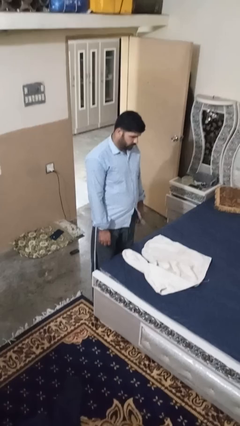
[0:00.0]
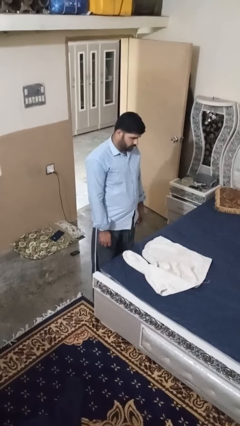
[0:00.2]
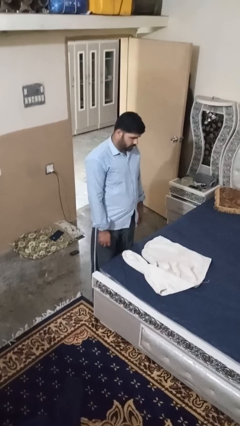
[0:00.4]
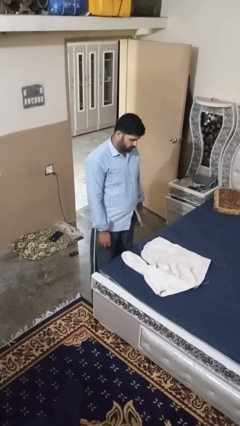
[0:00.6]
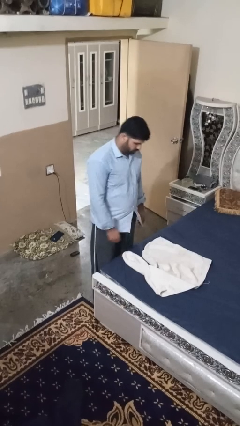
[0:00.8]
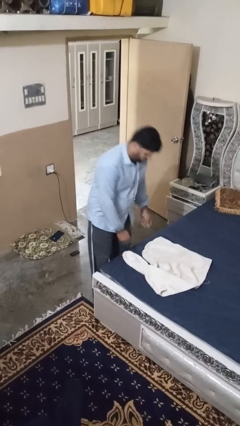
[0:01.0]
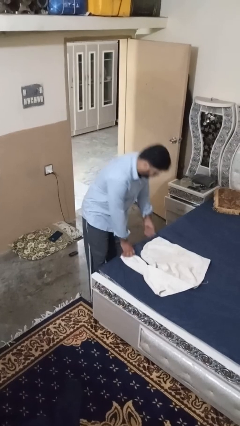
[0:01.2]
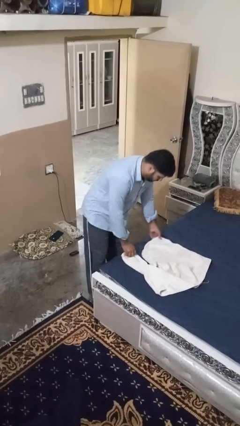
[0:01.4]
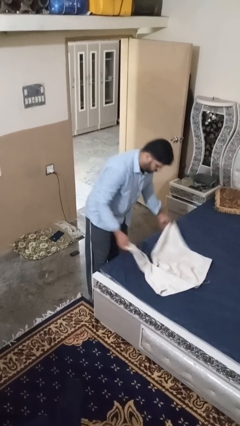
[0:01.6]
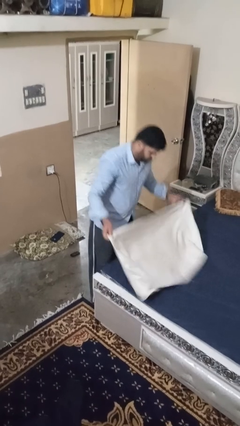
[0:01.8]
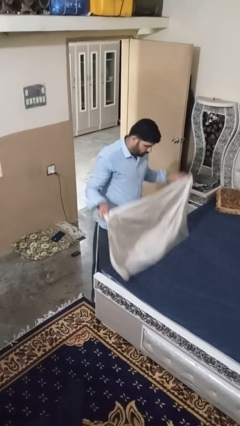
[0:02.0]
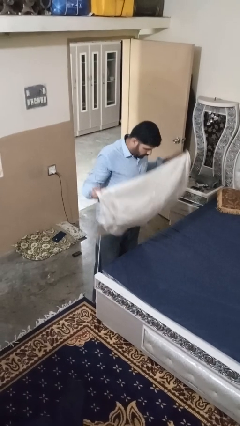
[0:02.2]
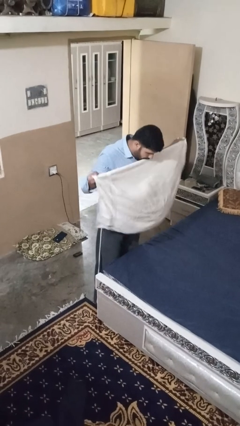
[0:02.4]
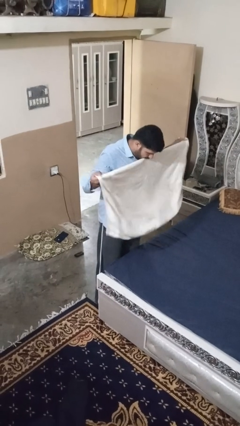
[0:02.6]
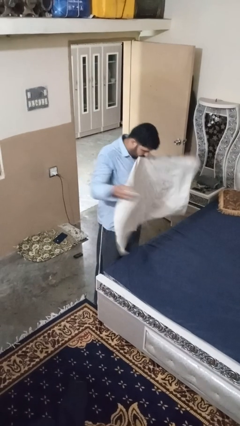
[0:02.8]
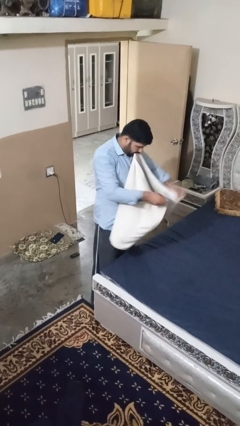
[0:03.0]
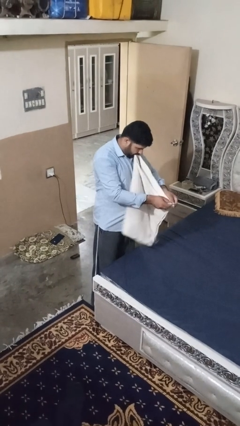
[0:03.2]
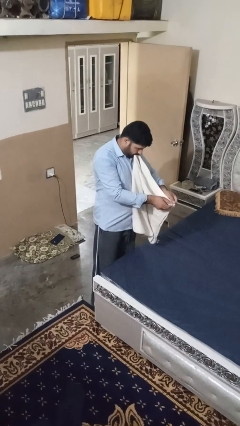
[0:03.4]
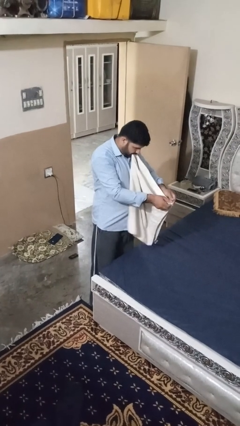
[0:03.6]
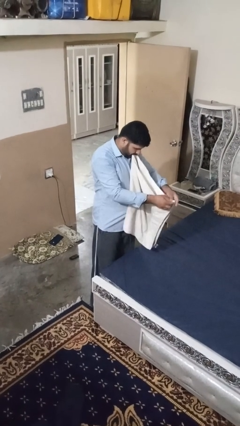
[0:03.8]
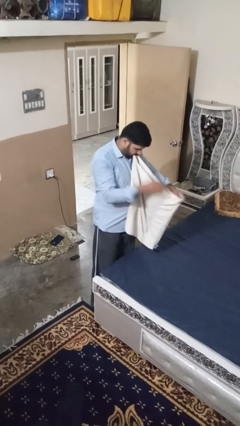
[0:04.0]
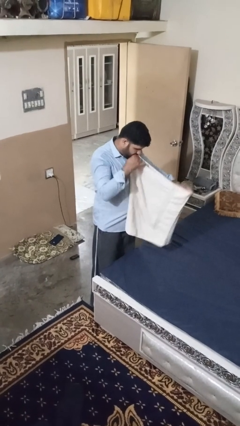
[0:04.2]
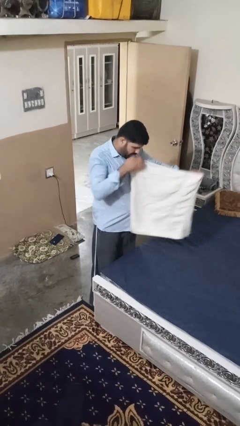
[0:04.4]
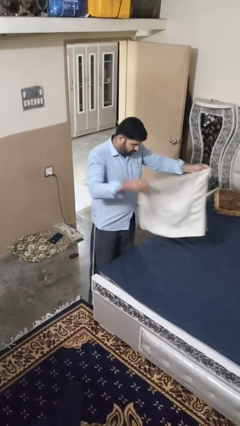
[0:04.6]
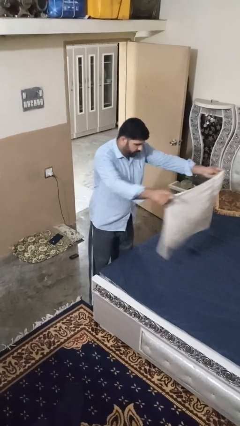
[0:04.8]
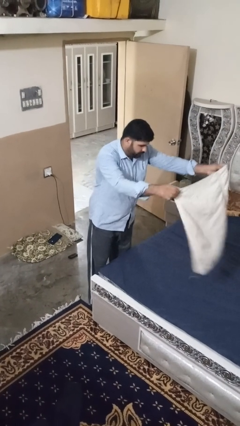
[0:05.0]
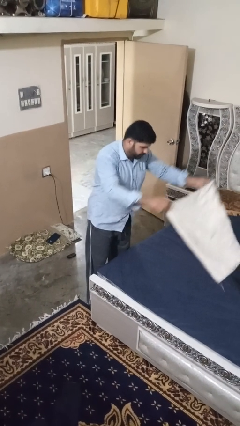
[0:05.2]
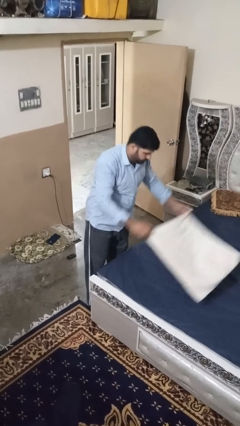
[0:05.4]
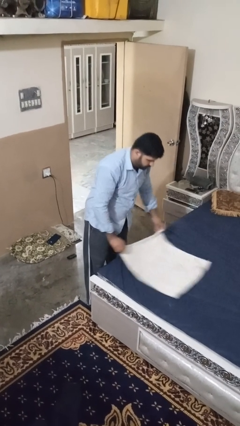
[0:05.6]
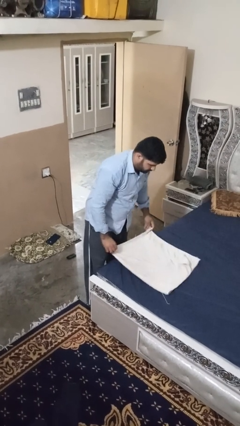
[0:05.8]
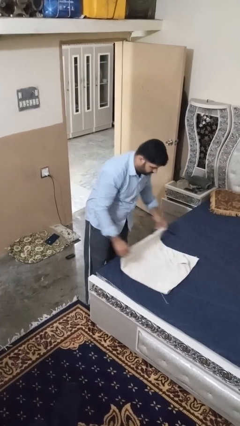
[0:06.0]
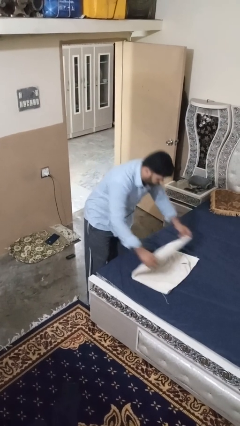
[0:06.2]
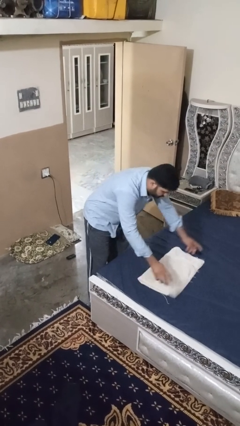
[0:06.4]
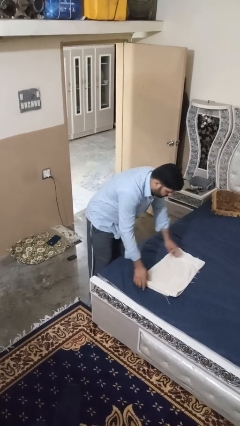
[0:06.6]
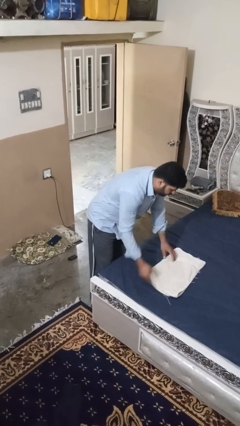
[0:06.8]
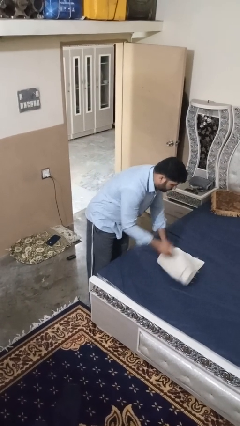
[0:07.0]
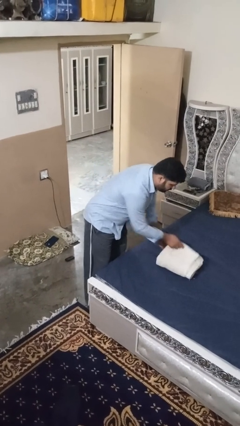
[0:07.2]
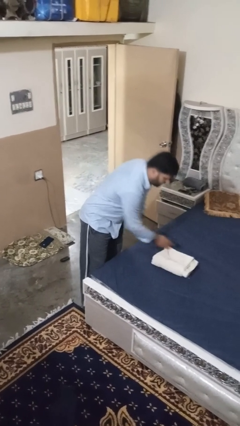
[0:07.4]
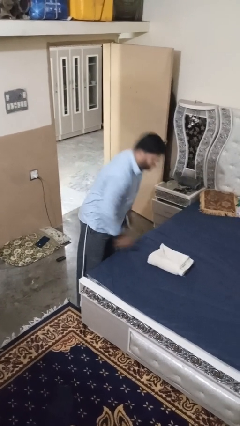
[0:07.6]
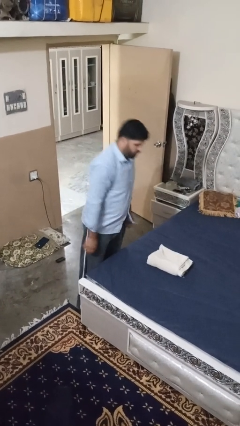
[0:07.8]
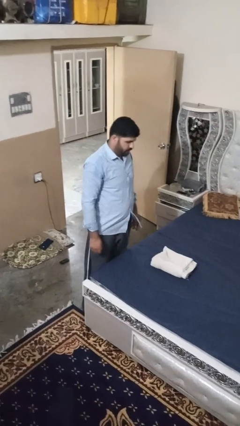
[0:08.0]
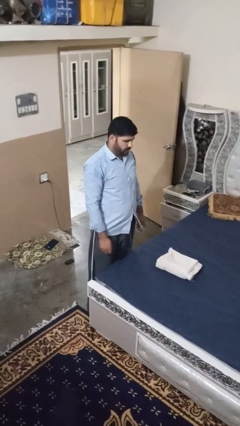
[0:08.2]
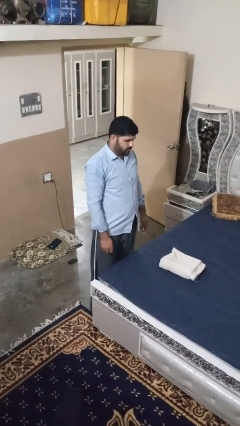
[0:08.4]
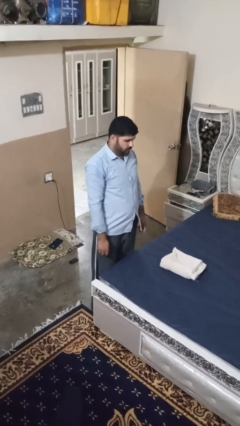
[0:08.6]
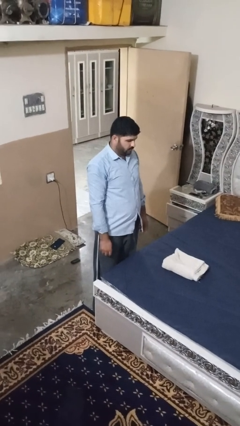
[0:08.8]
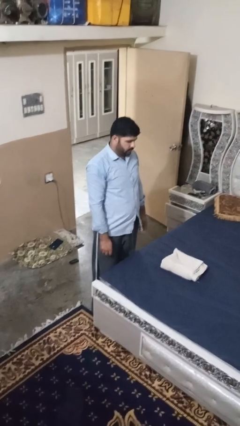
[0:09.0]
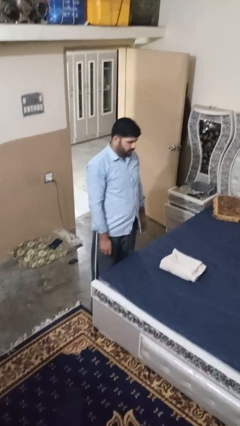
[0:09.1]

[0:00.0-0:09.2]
person folds towel

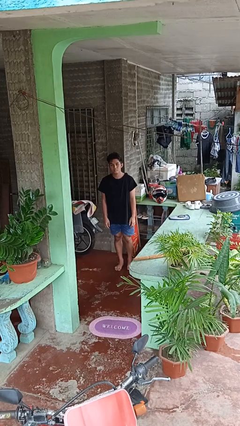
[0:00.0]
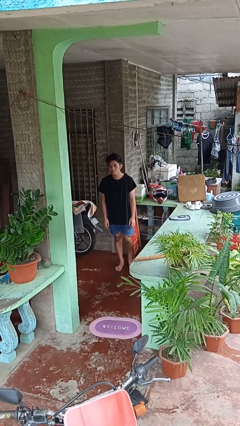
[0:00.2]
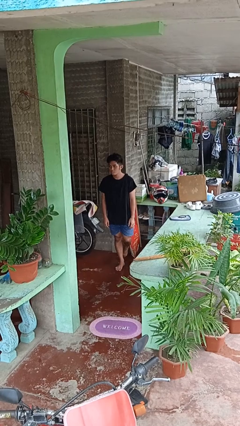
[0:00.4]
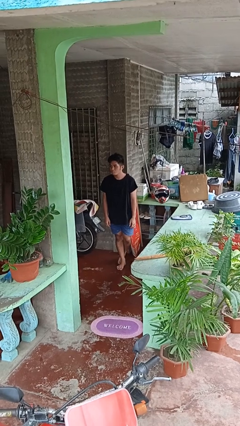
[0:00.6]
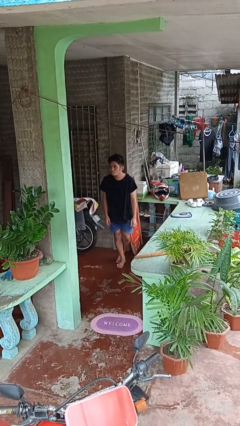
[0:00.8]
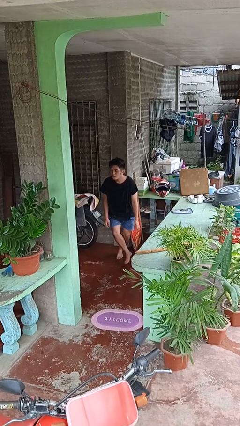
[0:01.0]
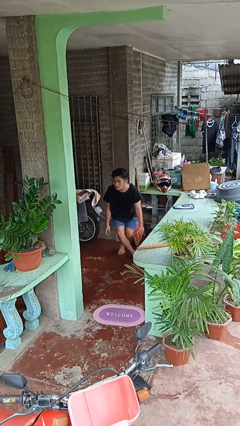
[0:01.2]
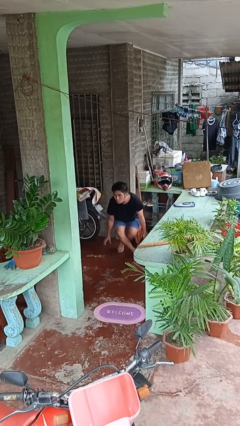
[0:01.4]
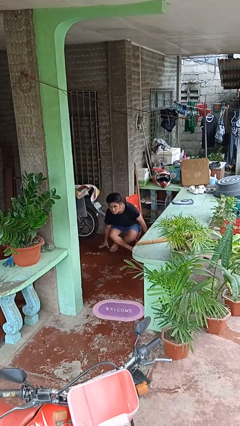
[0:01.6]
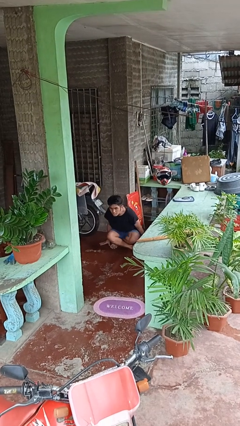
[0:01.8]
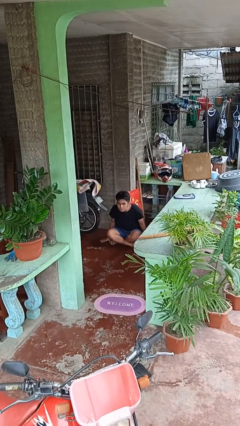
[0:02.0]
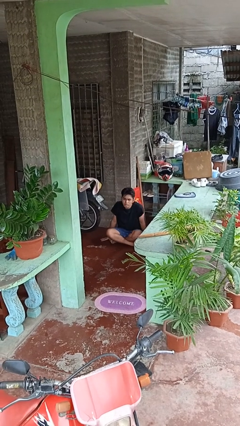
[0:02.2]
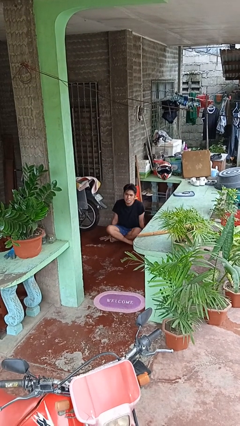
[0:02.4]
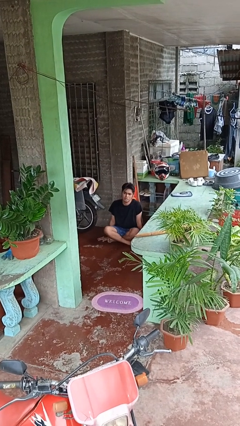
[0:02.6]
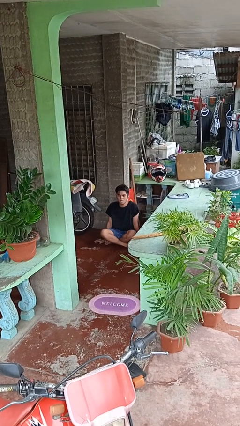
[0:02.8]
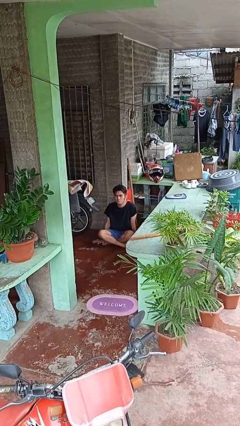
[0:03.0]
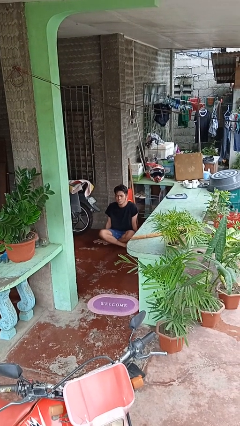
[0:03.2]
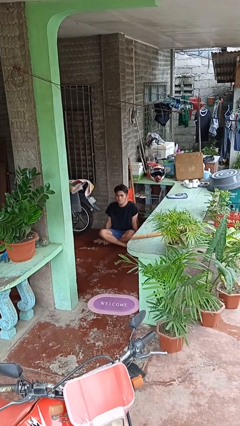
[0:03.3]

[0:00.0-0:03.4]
person sits crisscross

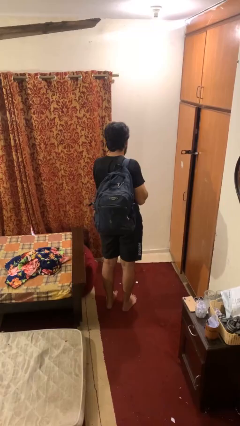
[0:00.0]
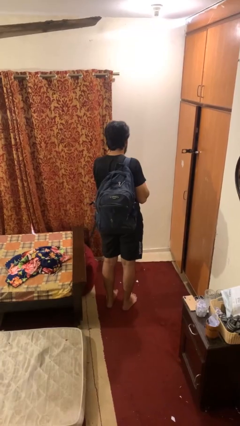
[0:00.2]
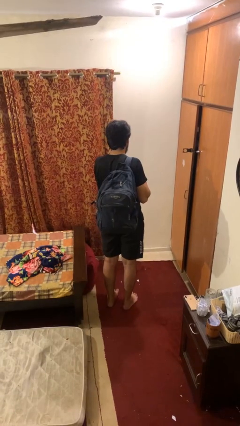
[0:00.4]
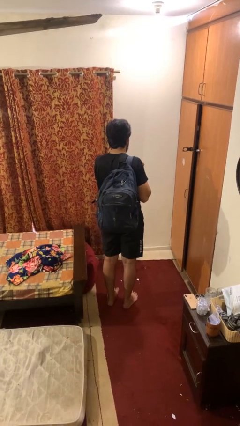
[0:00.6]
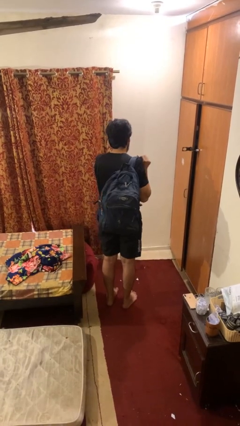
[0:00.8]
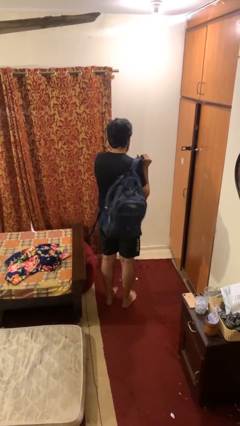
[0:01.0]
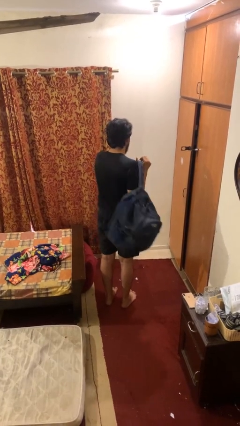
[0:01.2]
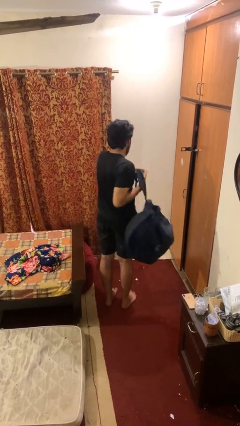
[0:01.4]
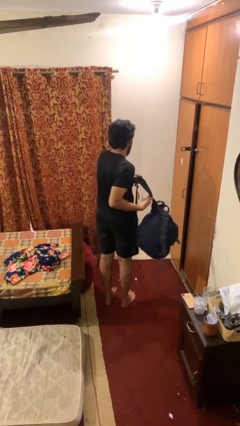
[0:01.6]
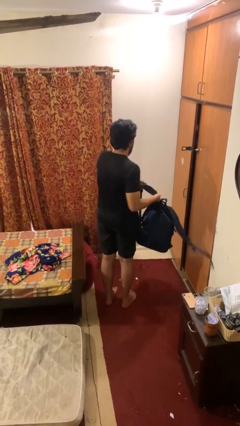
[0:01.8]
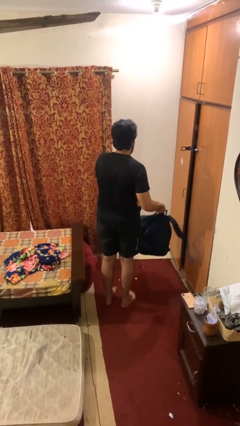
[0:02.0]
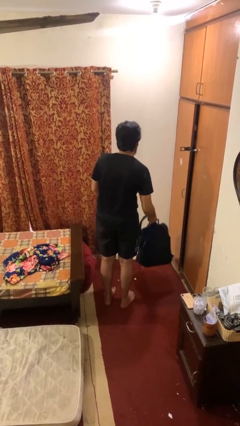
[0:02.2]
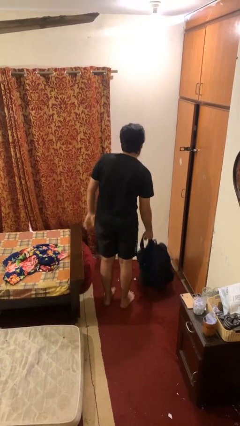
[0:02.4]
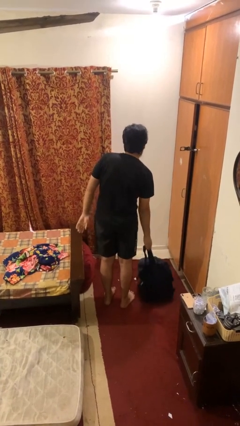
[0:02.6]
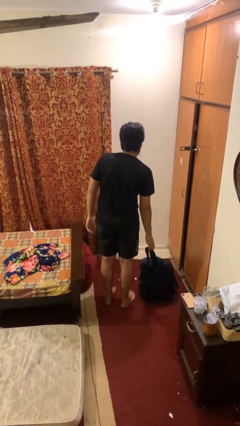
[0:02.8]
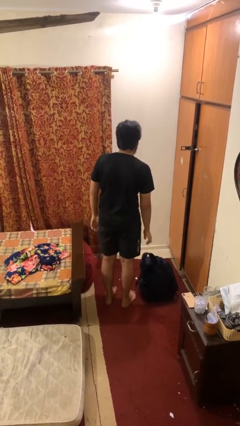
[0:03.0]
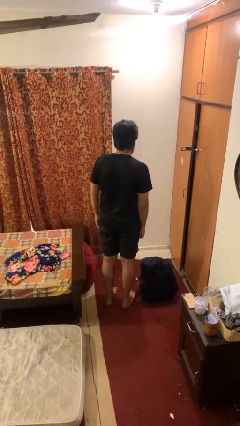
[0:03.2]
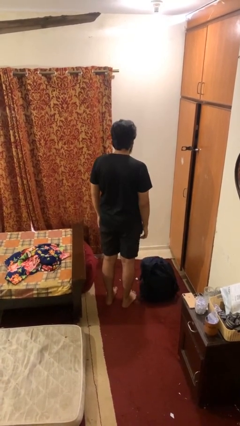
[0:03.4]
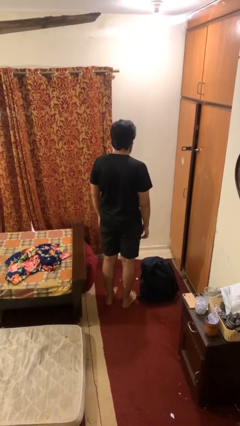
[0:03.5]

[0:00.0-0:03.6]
person takes off backpack

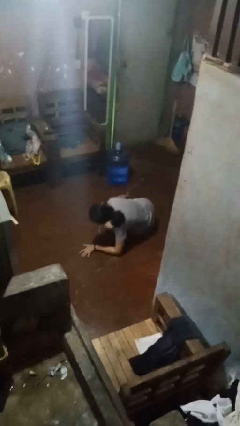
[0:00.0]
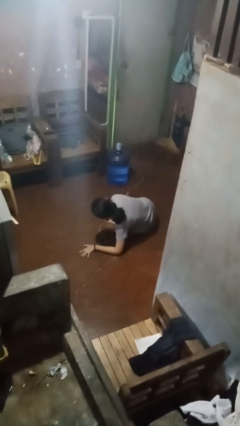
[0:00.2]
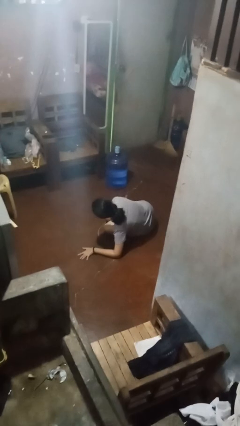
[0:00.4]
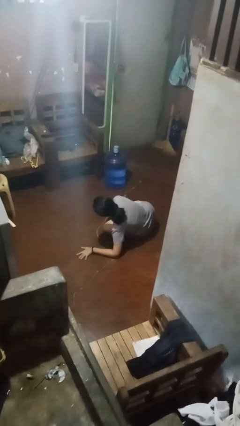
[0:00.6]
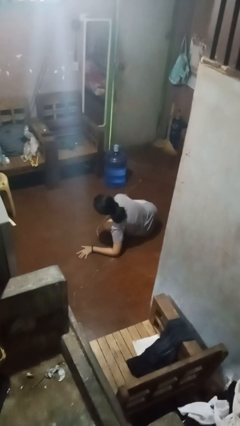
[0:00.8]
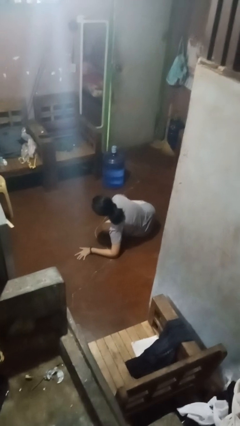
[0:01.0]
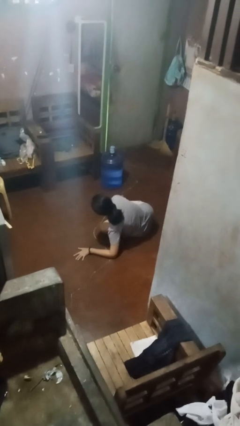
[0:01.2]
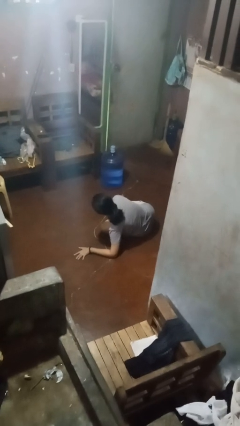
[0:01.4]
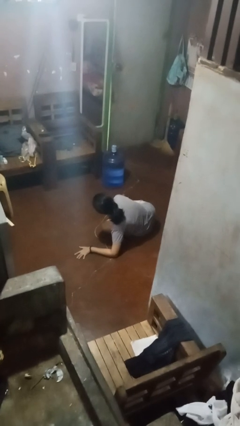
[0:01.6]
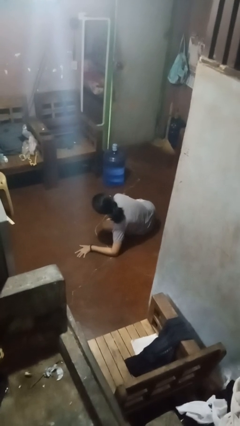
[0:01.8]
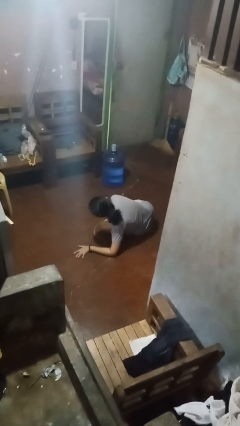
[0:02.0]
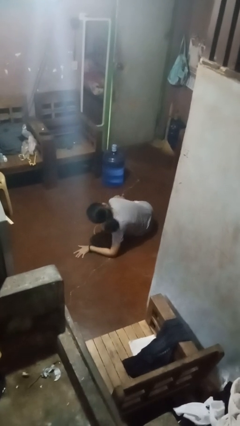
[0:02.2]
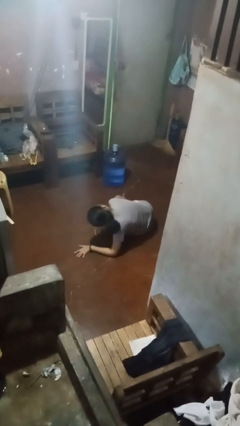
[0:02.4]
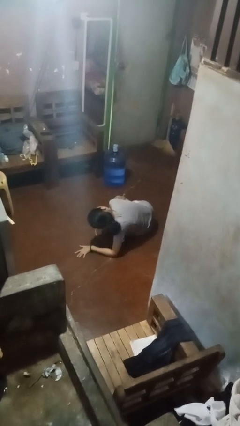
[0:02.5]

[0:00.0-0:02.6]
person lies down on floor
